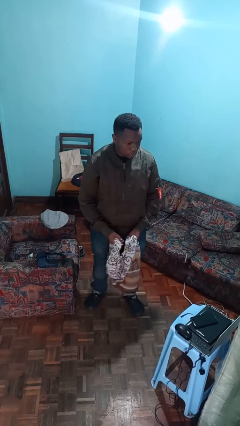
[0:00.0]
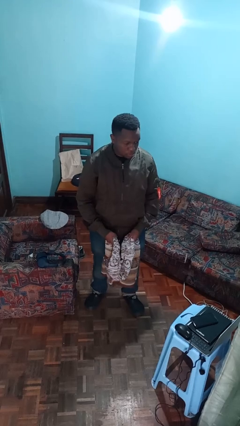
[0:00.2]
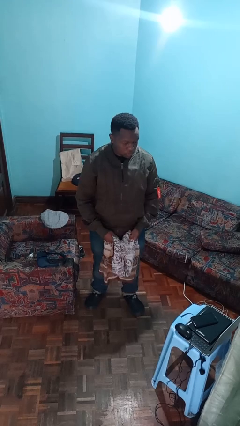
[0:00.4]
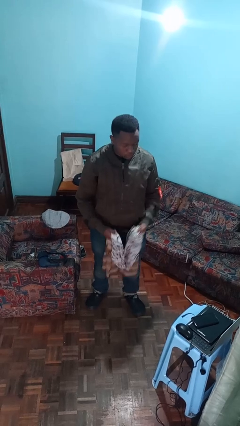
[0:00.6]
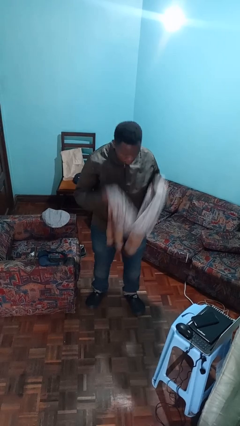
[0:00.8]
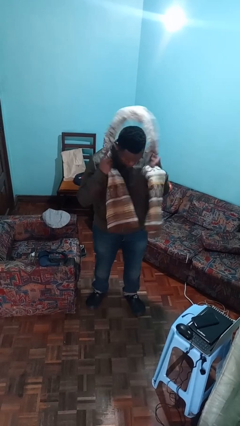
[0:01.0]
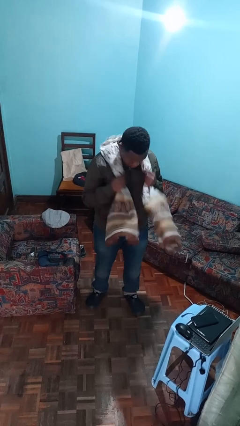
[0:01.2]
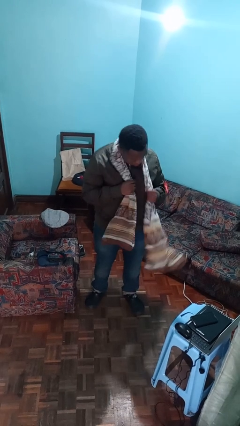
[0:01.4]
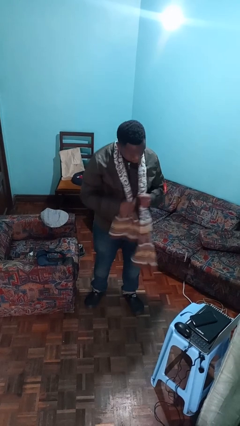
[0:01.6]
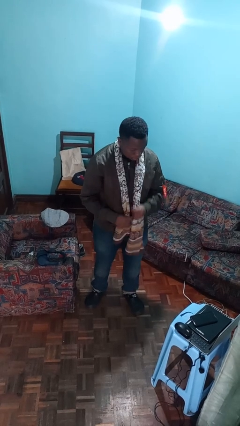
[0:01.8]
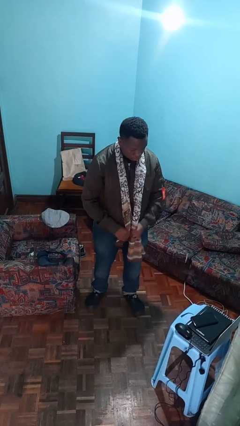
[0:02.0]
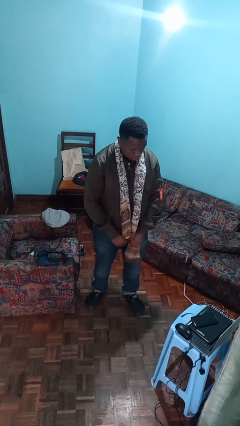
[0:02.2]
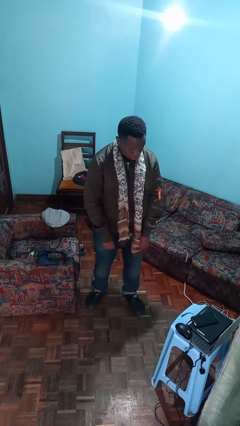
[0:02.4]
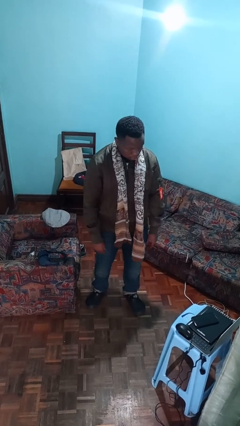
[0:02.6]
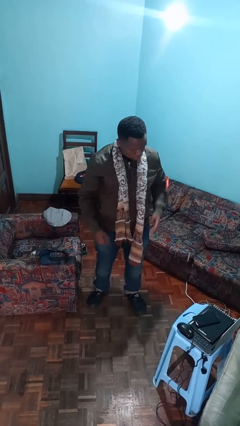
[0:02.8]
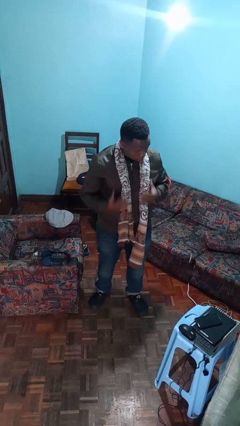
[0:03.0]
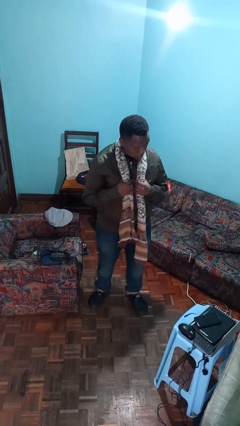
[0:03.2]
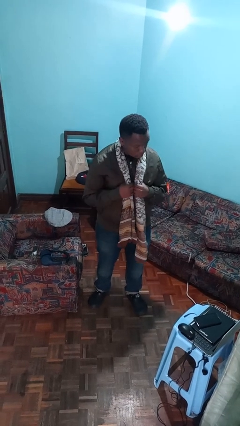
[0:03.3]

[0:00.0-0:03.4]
person puts on scarf

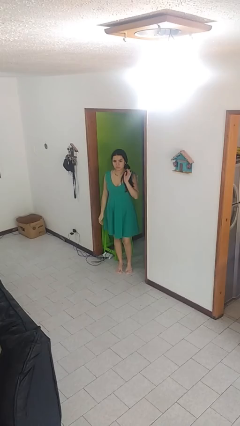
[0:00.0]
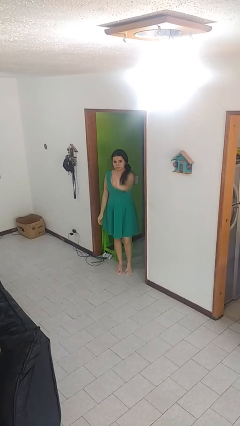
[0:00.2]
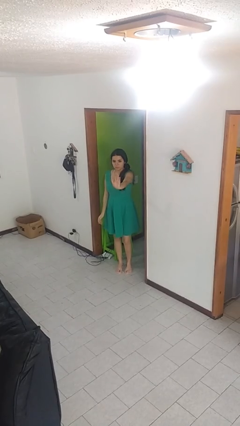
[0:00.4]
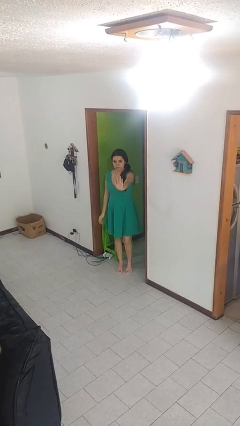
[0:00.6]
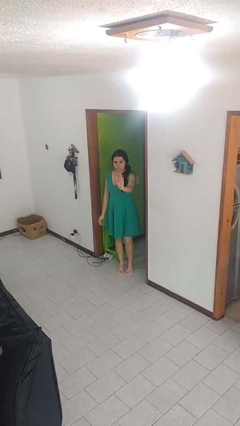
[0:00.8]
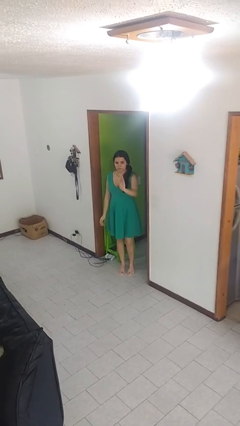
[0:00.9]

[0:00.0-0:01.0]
person gestures stop

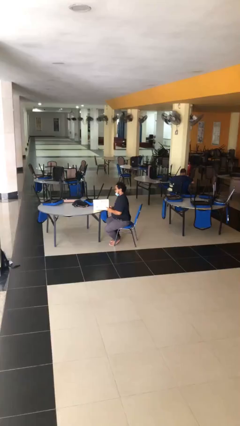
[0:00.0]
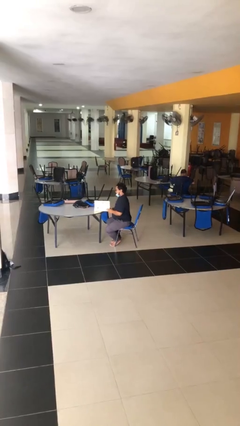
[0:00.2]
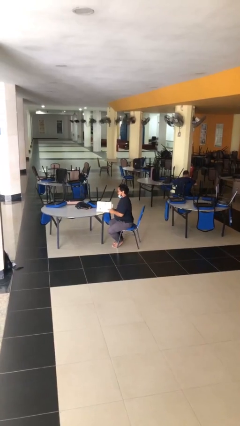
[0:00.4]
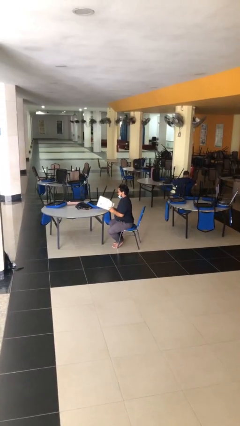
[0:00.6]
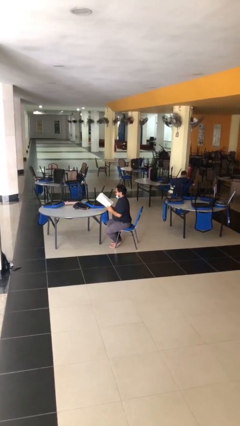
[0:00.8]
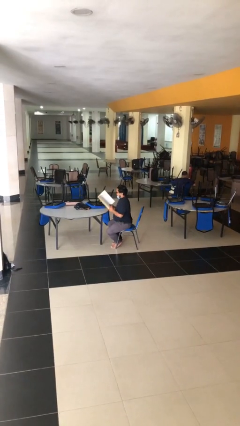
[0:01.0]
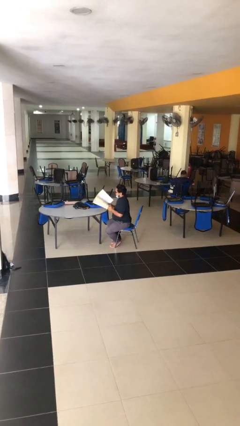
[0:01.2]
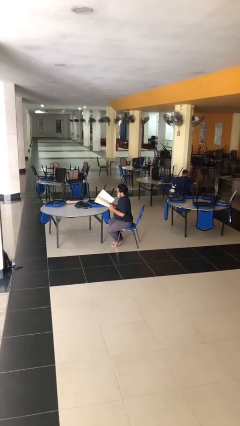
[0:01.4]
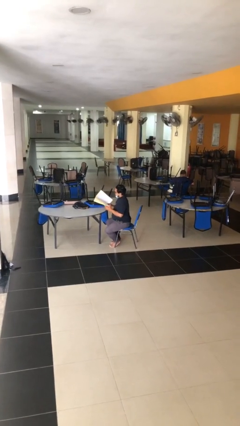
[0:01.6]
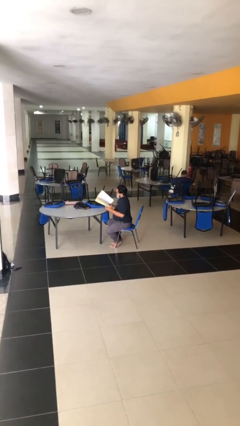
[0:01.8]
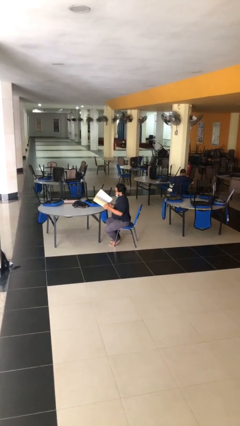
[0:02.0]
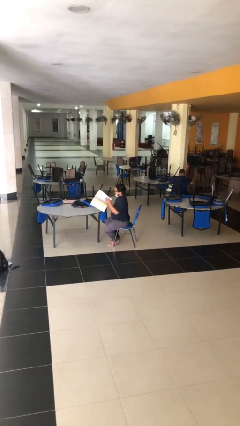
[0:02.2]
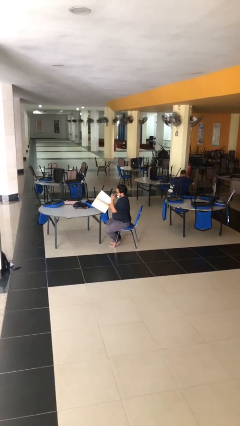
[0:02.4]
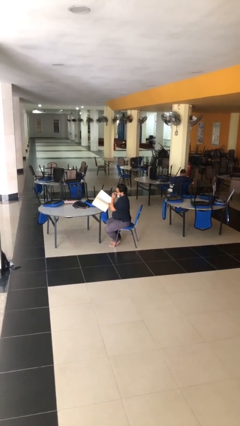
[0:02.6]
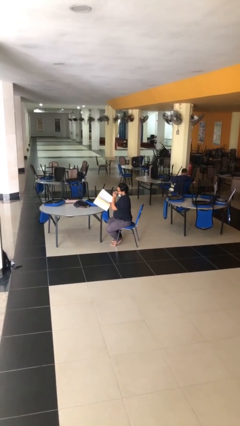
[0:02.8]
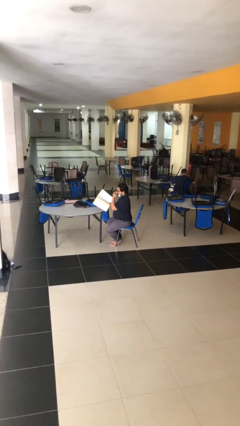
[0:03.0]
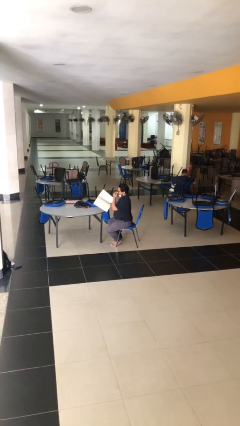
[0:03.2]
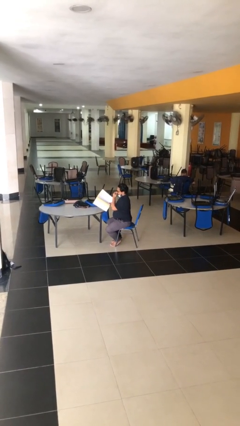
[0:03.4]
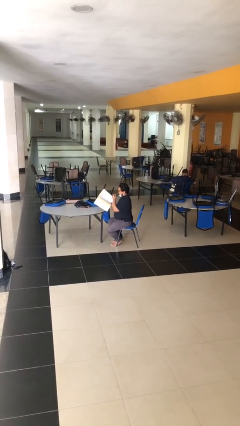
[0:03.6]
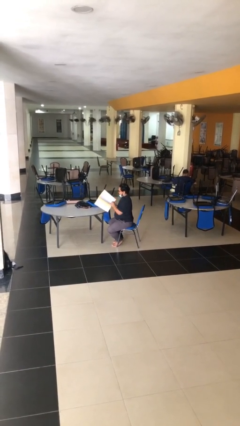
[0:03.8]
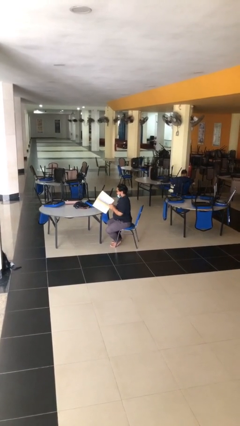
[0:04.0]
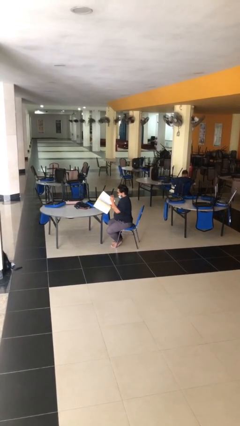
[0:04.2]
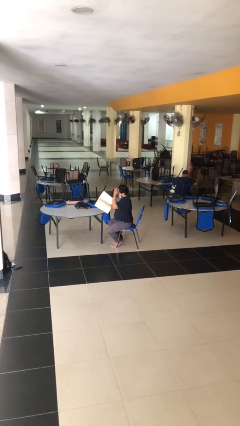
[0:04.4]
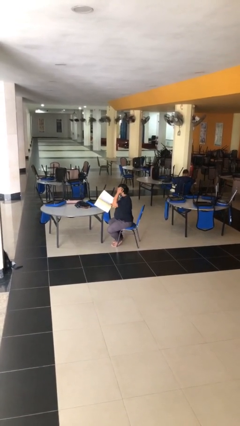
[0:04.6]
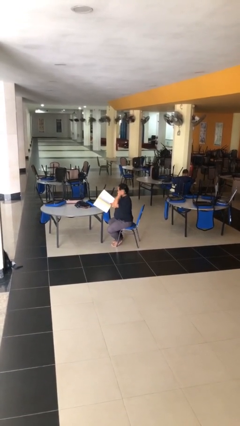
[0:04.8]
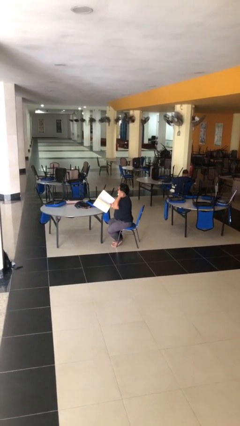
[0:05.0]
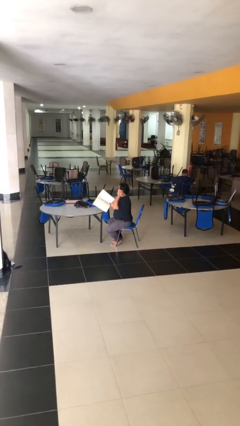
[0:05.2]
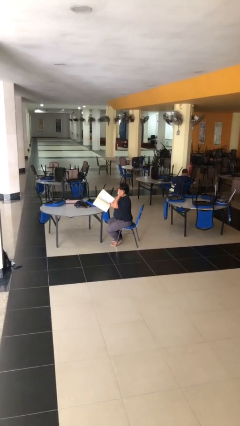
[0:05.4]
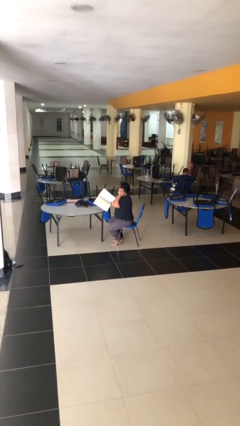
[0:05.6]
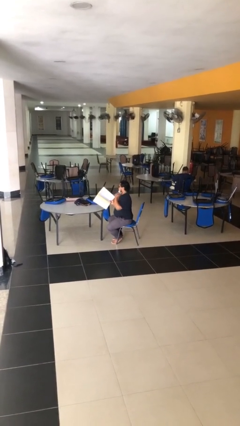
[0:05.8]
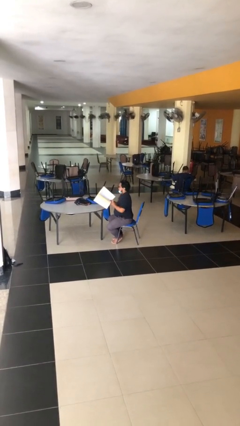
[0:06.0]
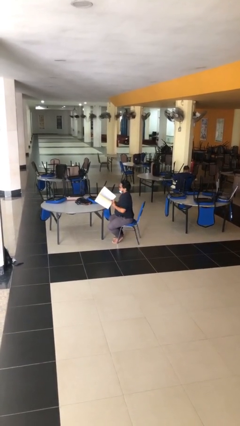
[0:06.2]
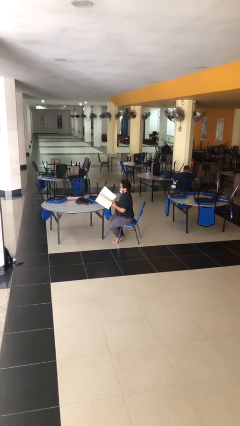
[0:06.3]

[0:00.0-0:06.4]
person reads document

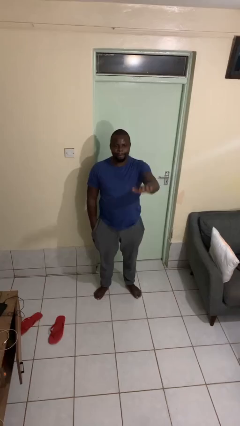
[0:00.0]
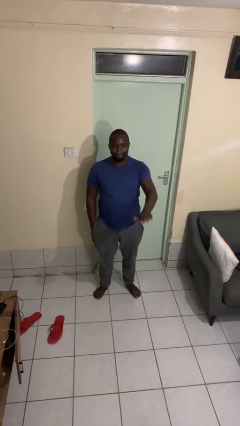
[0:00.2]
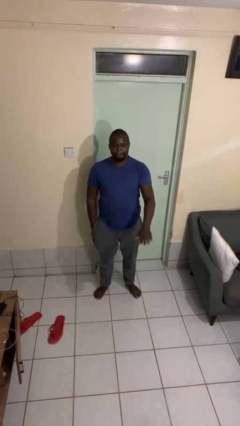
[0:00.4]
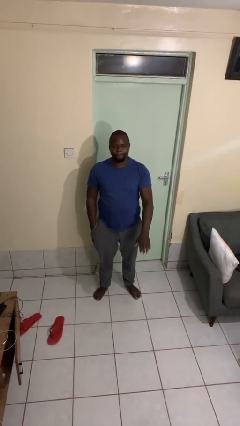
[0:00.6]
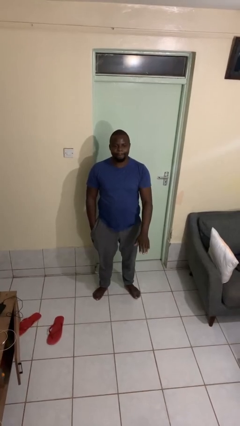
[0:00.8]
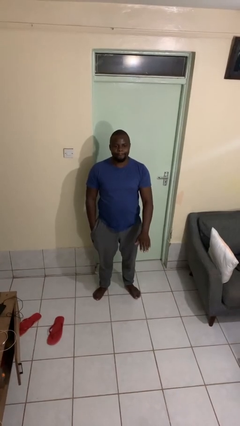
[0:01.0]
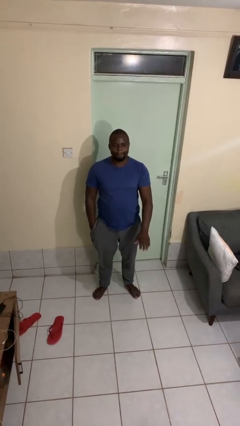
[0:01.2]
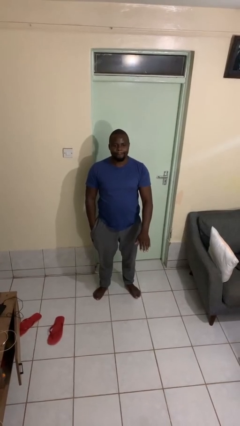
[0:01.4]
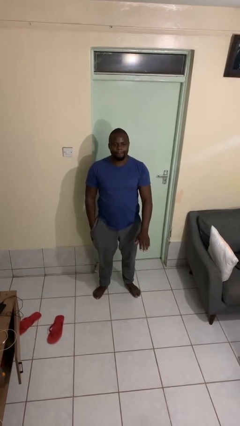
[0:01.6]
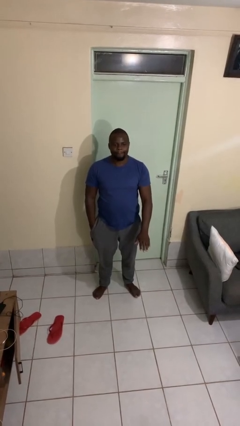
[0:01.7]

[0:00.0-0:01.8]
person gestures swipe down

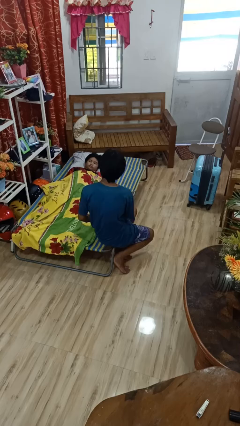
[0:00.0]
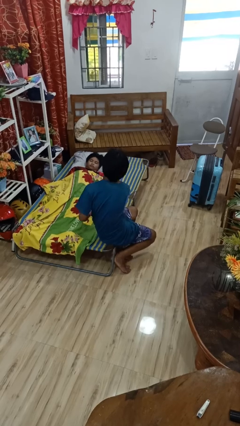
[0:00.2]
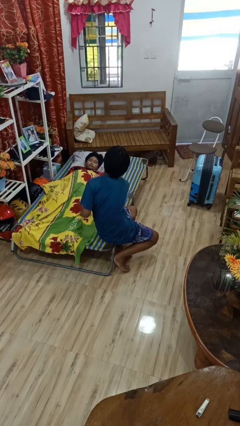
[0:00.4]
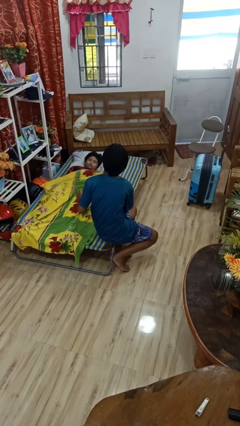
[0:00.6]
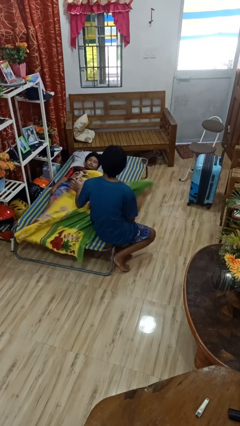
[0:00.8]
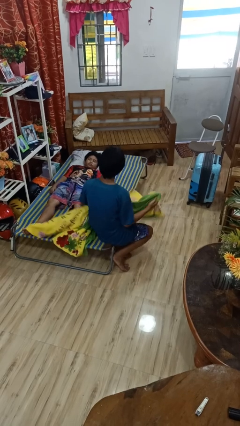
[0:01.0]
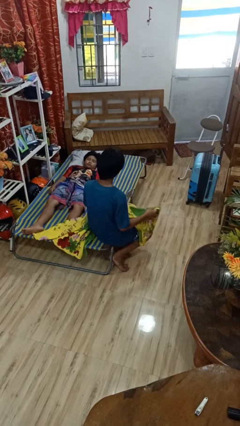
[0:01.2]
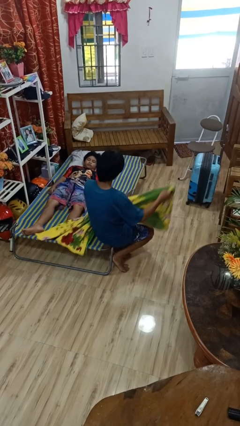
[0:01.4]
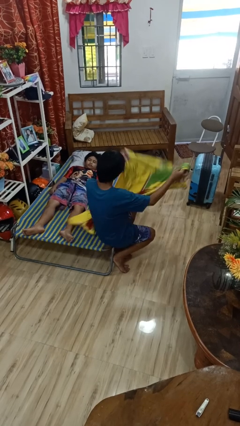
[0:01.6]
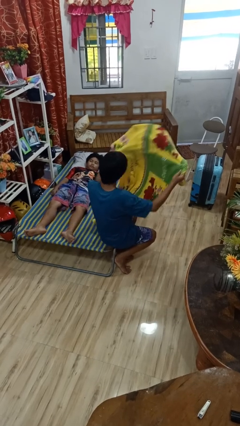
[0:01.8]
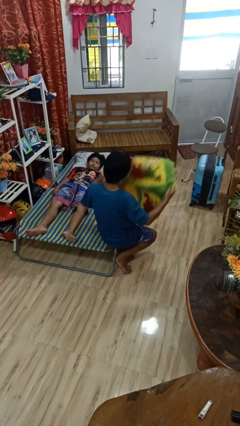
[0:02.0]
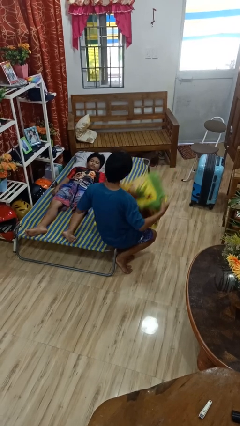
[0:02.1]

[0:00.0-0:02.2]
person uncovers friend with blanket

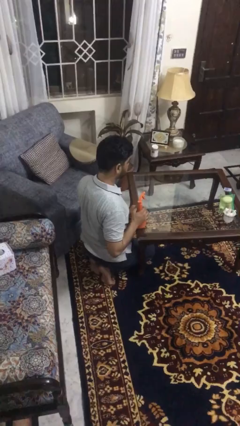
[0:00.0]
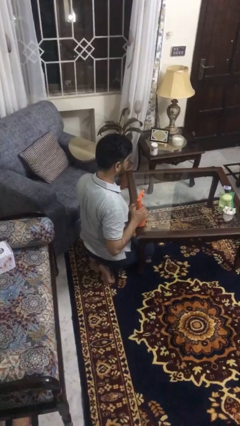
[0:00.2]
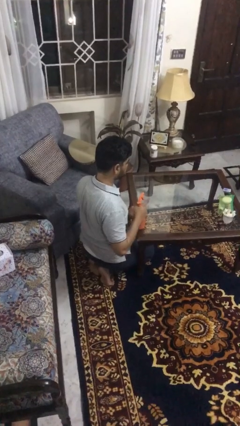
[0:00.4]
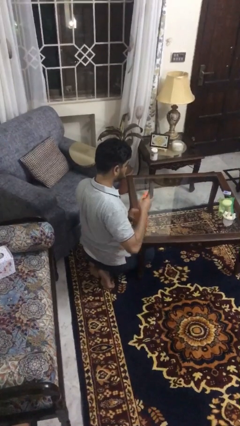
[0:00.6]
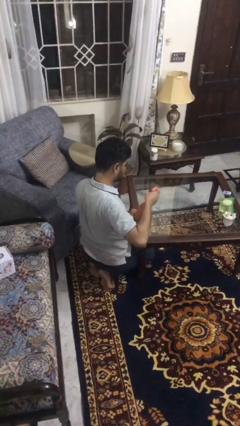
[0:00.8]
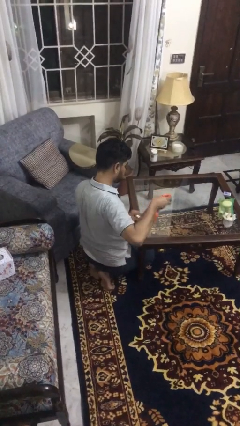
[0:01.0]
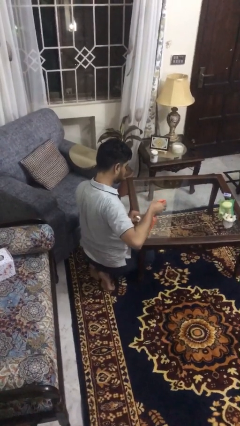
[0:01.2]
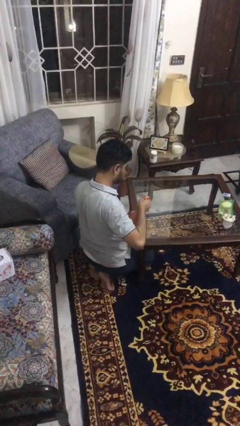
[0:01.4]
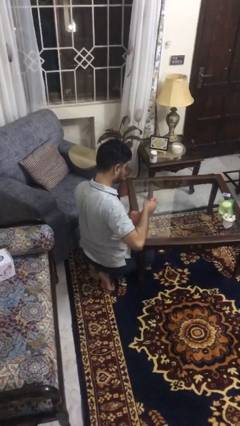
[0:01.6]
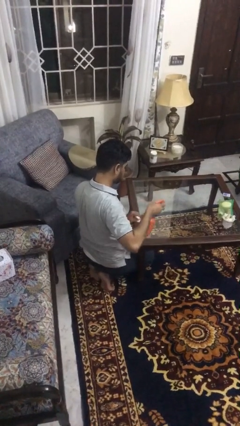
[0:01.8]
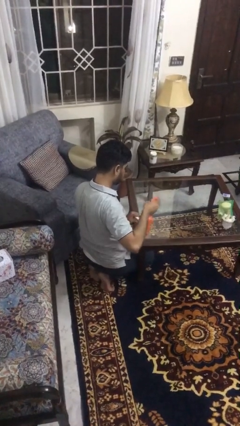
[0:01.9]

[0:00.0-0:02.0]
person sprays from bottle

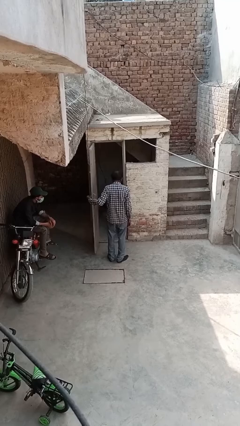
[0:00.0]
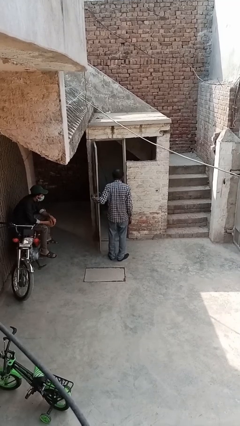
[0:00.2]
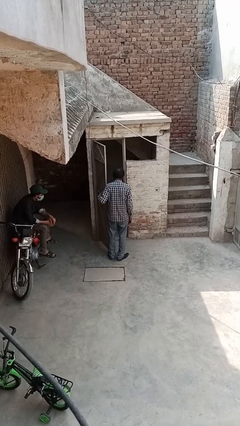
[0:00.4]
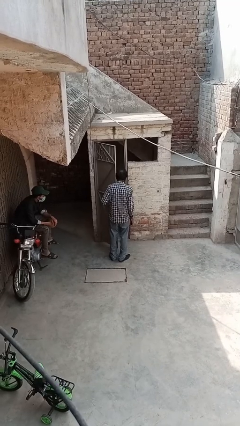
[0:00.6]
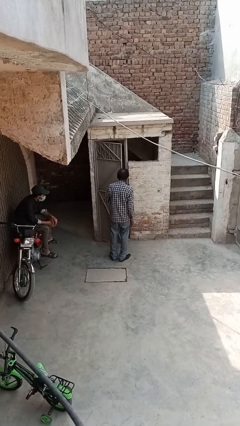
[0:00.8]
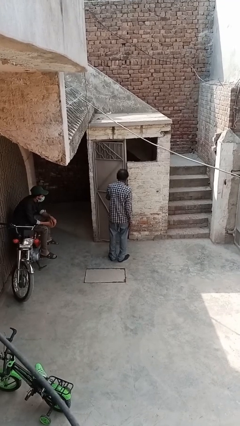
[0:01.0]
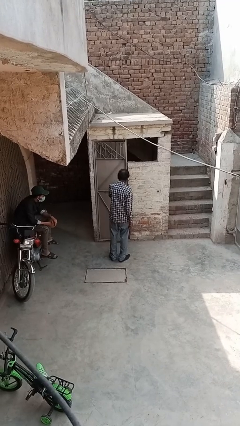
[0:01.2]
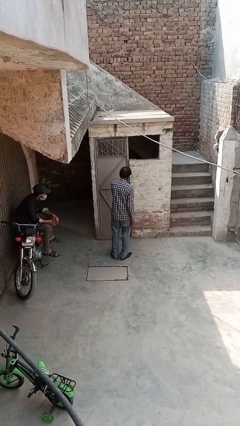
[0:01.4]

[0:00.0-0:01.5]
person closes facility door
